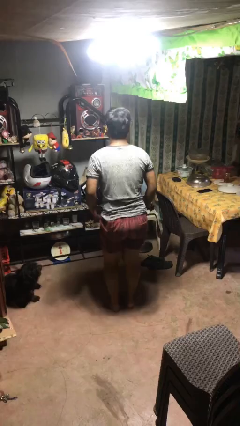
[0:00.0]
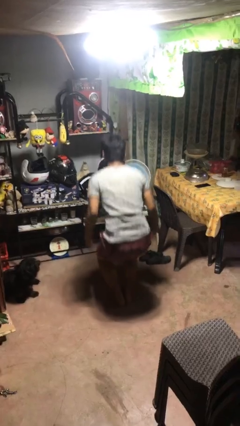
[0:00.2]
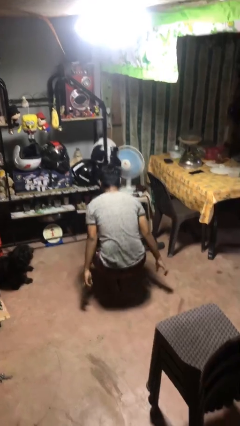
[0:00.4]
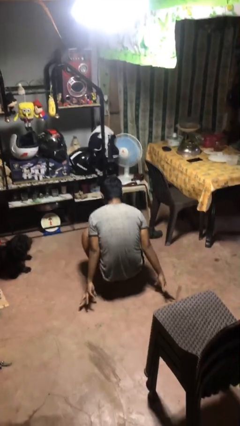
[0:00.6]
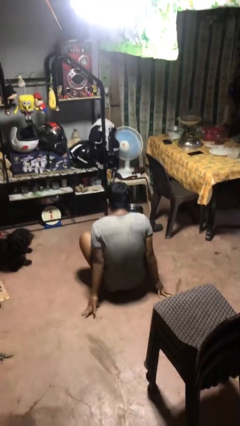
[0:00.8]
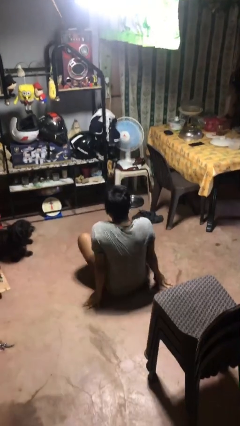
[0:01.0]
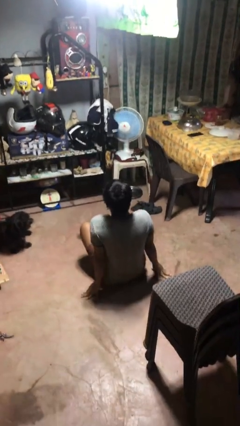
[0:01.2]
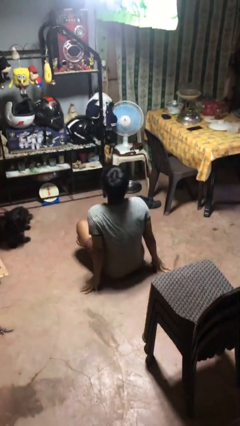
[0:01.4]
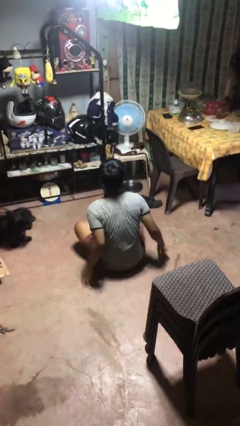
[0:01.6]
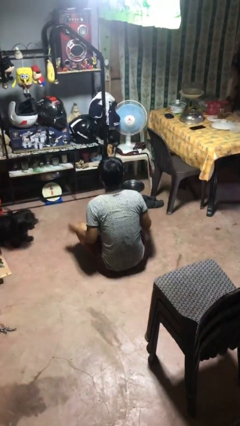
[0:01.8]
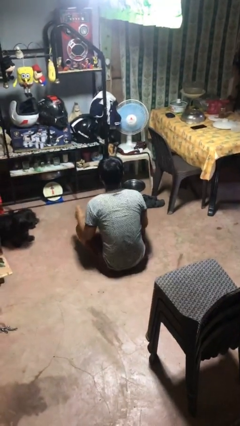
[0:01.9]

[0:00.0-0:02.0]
person sits crisscross

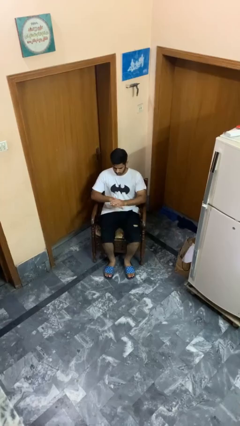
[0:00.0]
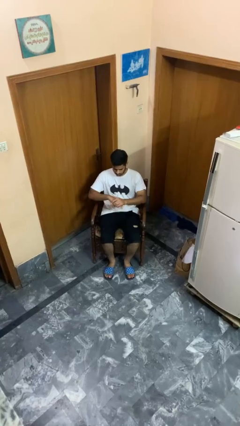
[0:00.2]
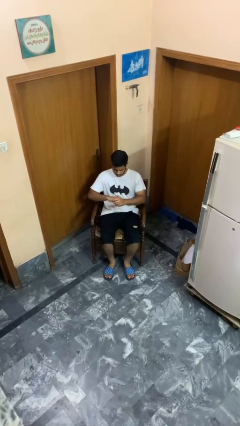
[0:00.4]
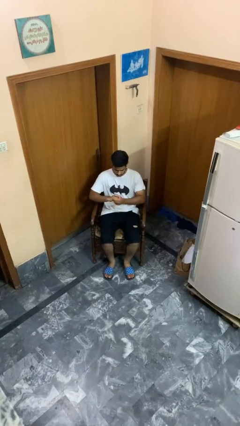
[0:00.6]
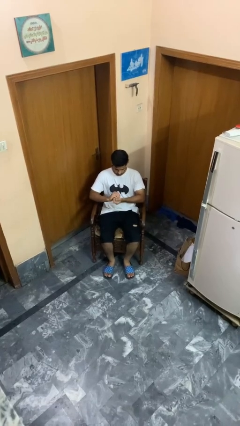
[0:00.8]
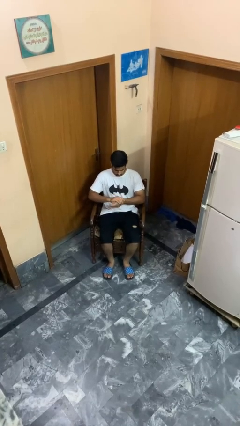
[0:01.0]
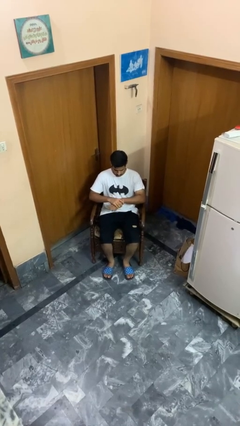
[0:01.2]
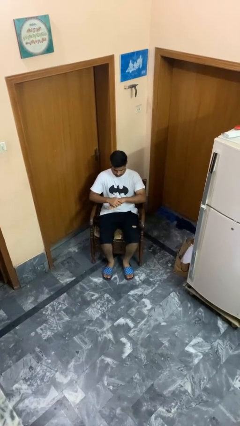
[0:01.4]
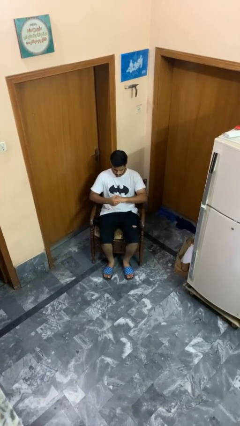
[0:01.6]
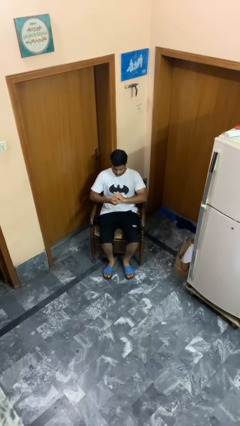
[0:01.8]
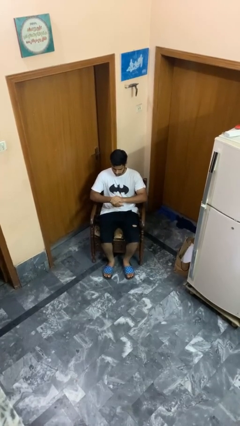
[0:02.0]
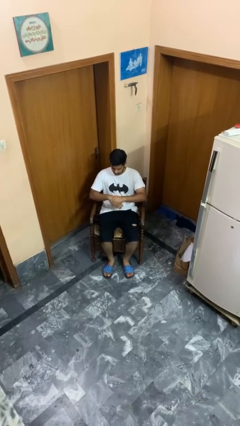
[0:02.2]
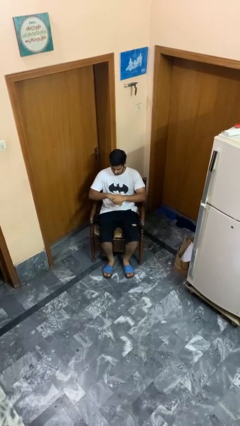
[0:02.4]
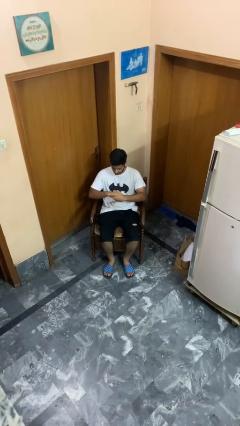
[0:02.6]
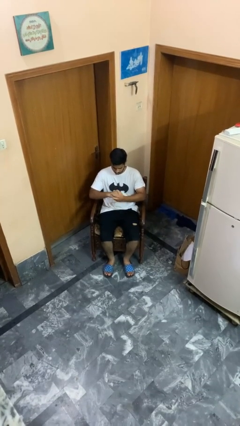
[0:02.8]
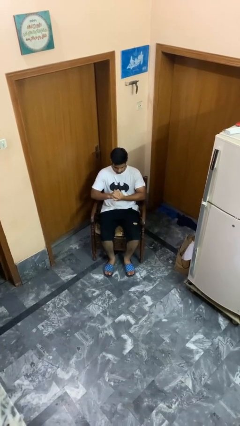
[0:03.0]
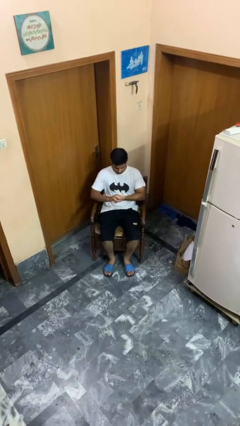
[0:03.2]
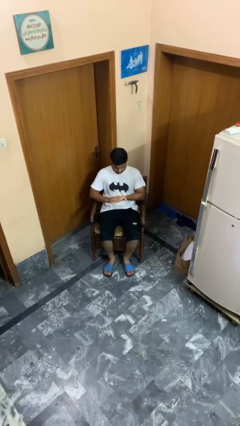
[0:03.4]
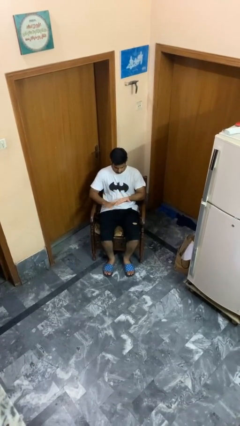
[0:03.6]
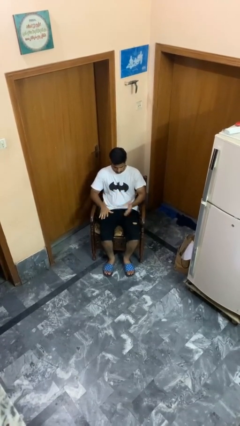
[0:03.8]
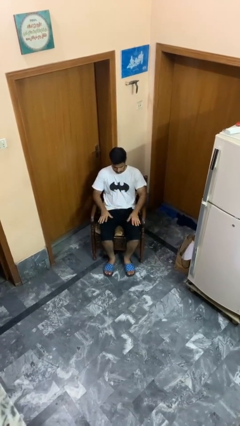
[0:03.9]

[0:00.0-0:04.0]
person looks at hands in lap

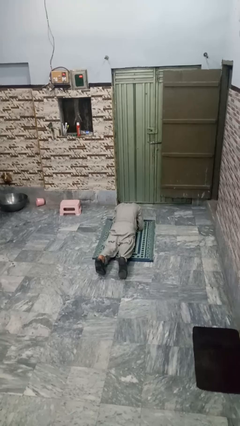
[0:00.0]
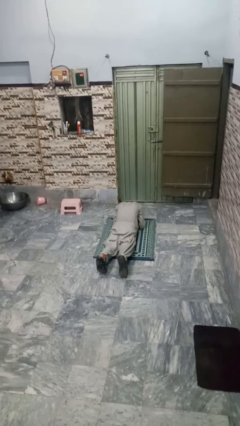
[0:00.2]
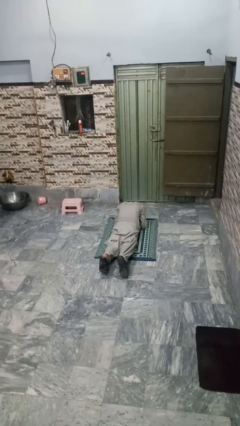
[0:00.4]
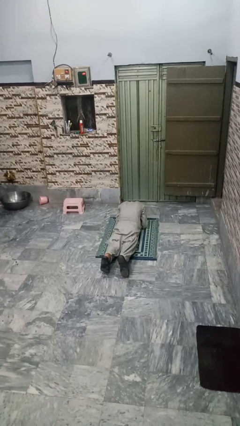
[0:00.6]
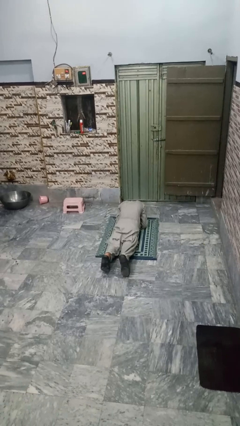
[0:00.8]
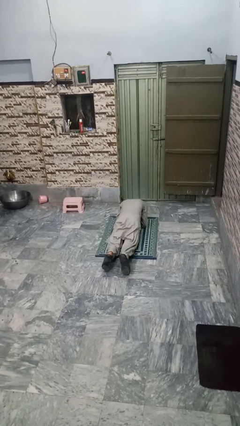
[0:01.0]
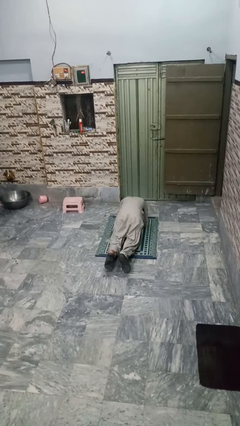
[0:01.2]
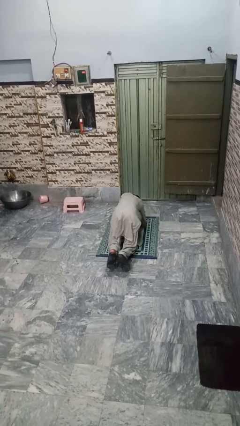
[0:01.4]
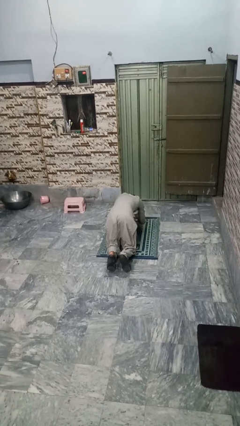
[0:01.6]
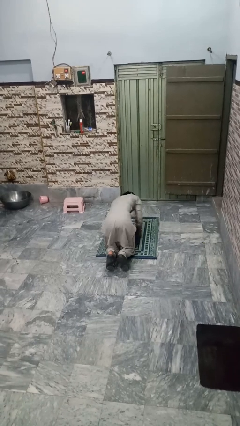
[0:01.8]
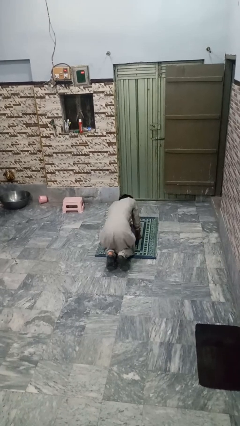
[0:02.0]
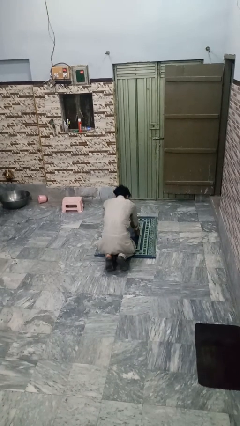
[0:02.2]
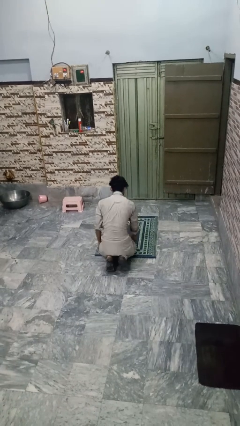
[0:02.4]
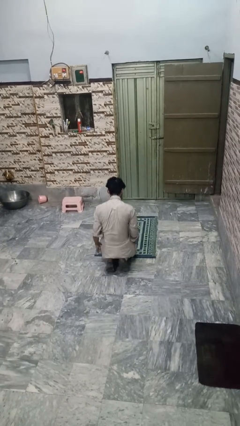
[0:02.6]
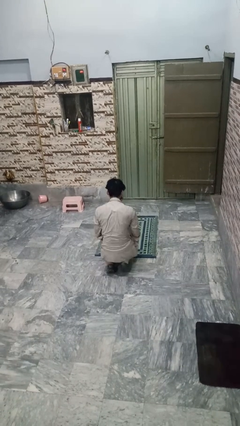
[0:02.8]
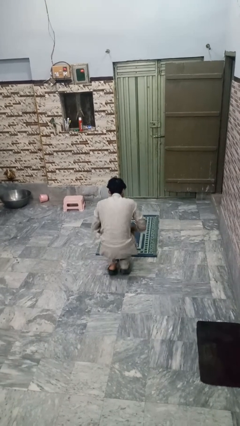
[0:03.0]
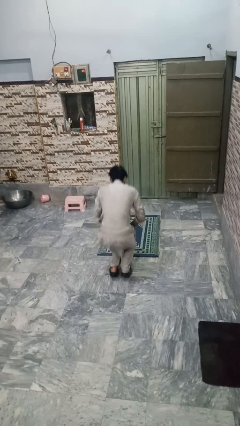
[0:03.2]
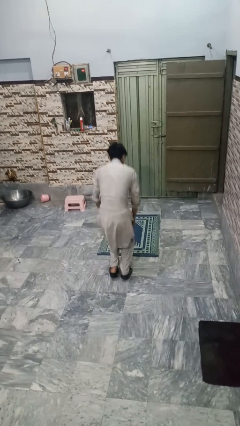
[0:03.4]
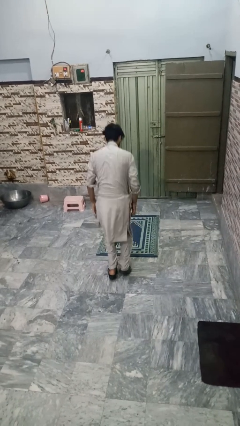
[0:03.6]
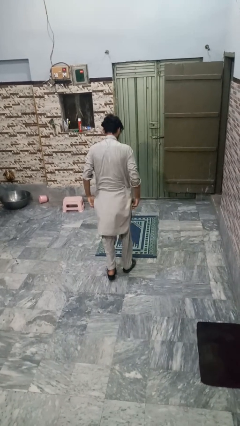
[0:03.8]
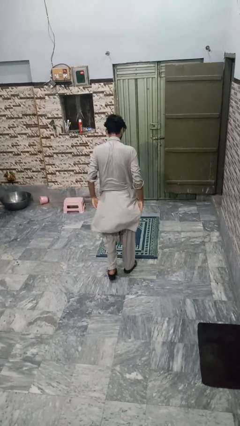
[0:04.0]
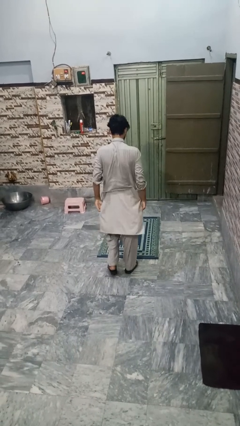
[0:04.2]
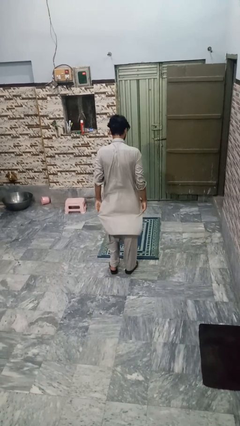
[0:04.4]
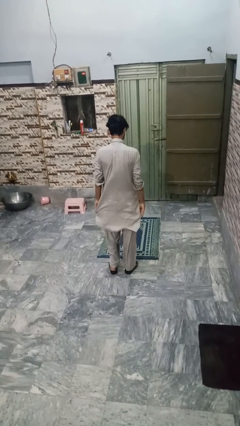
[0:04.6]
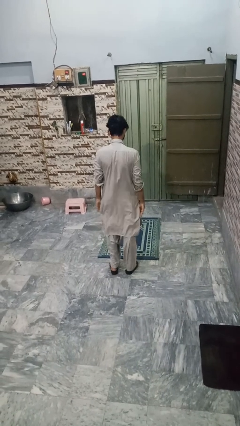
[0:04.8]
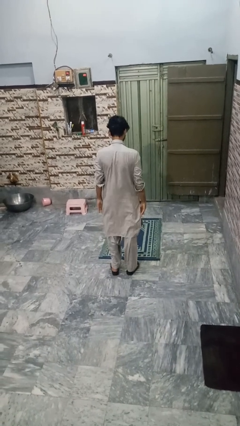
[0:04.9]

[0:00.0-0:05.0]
person stands up from floor

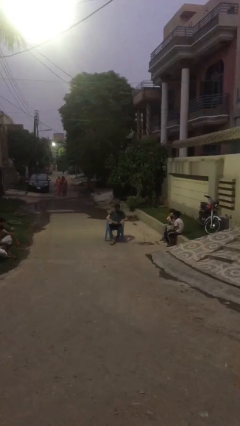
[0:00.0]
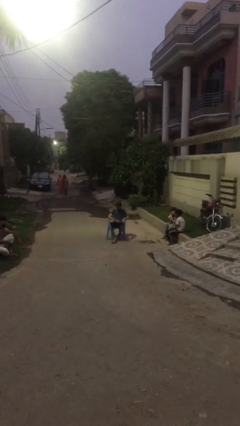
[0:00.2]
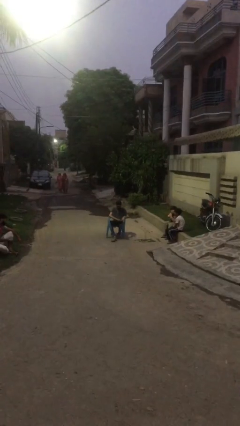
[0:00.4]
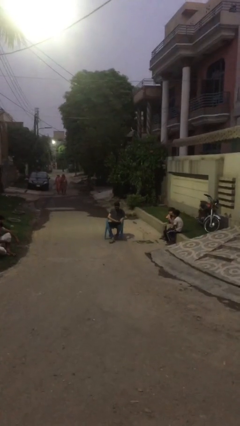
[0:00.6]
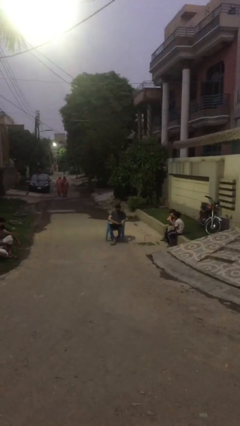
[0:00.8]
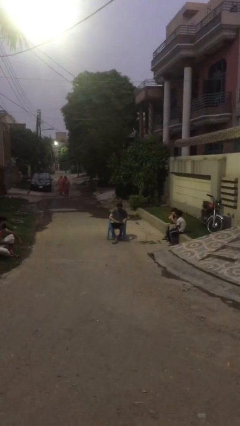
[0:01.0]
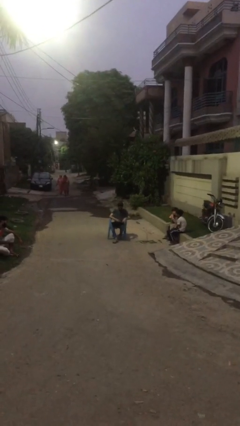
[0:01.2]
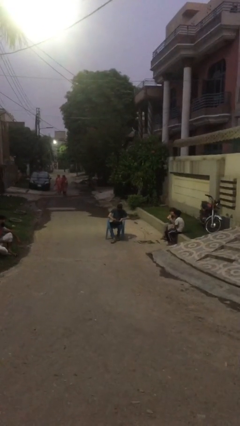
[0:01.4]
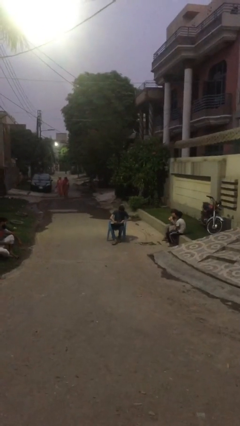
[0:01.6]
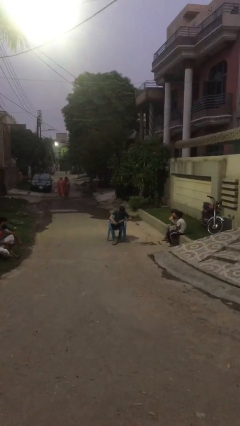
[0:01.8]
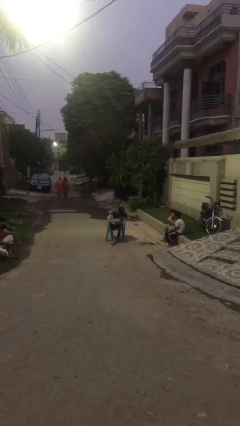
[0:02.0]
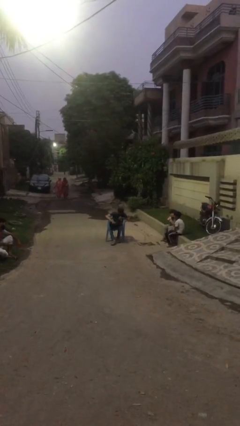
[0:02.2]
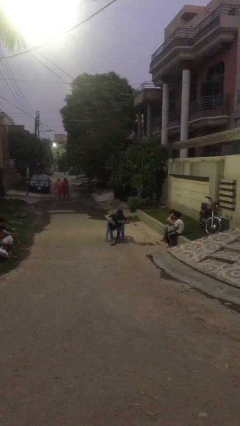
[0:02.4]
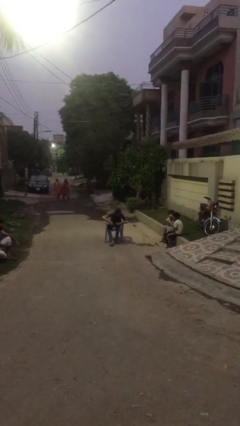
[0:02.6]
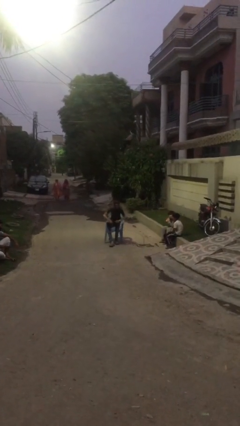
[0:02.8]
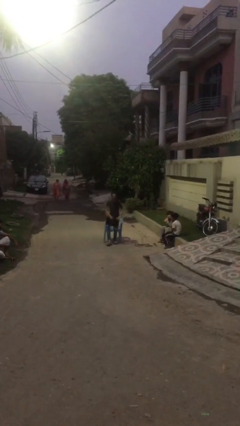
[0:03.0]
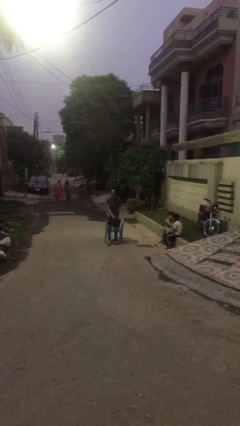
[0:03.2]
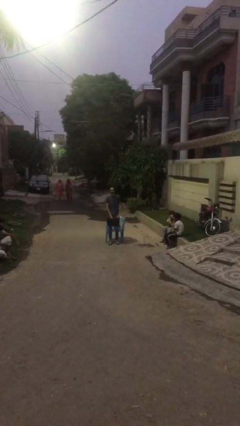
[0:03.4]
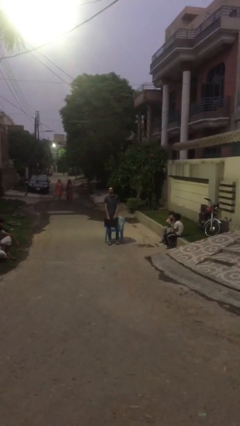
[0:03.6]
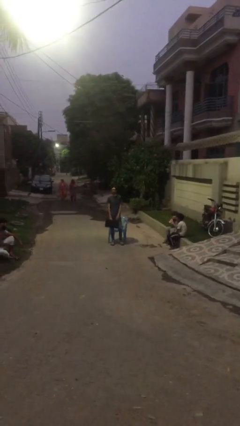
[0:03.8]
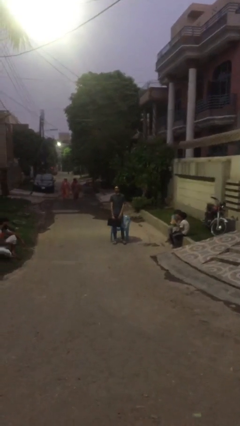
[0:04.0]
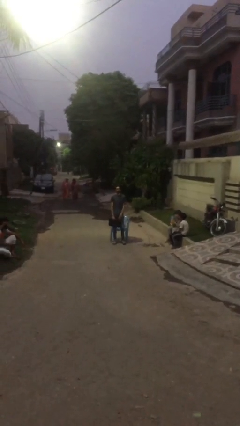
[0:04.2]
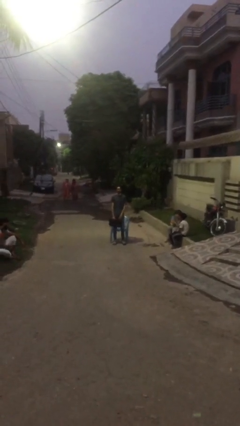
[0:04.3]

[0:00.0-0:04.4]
person stands up

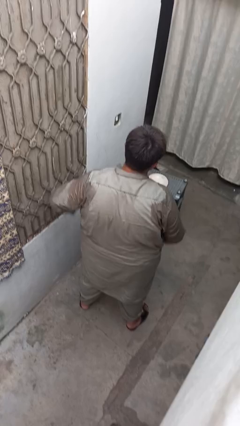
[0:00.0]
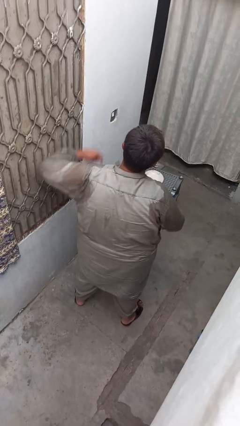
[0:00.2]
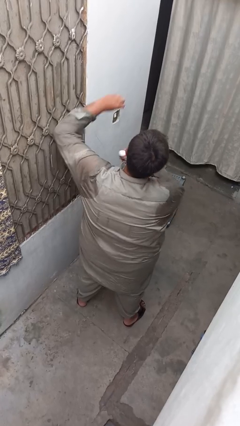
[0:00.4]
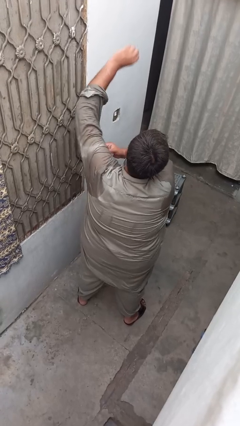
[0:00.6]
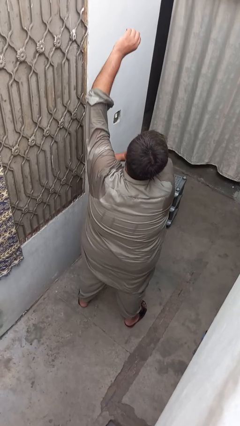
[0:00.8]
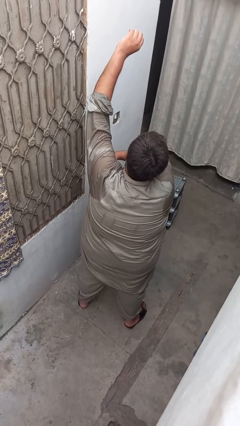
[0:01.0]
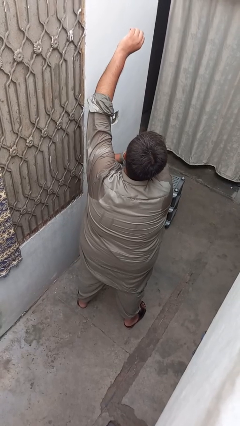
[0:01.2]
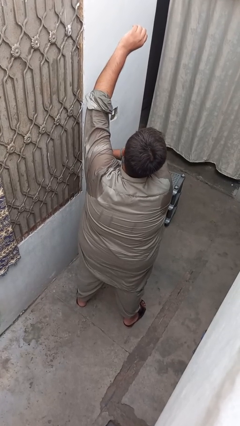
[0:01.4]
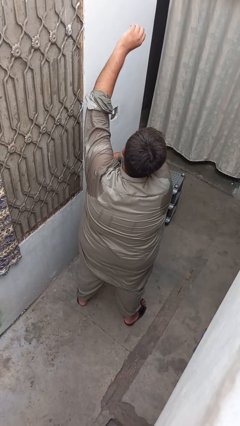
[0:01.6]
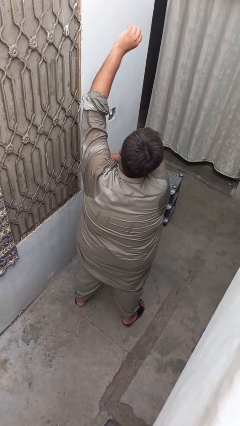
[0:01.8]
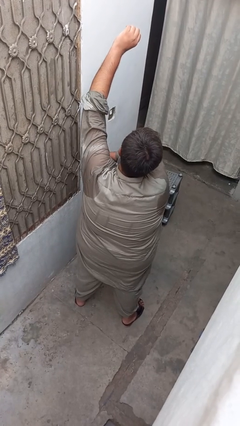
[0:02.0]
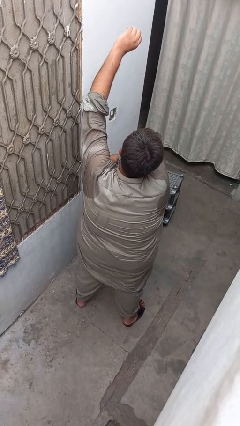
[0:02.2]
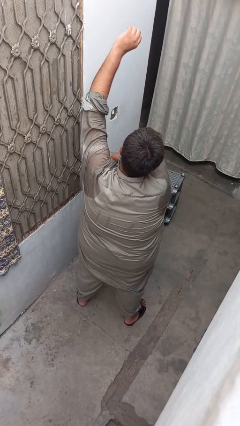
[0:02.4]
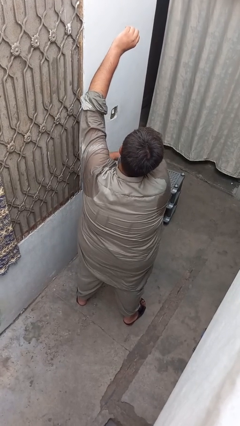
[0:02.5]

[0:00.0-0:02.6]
person applies deodorant
